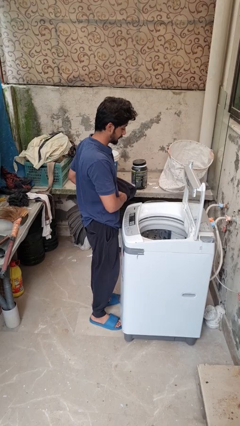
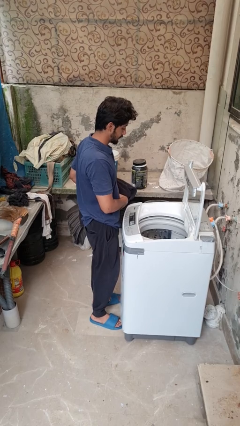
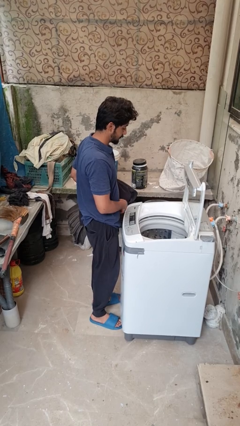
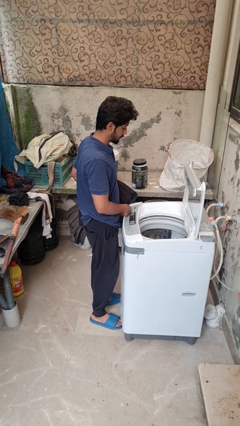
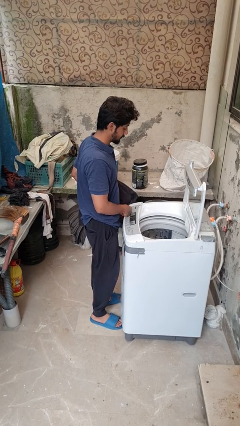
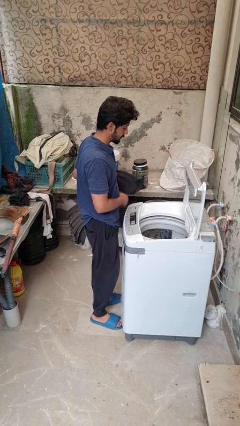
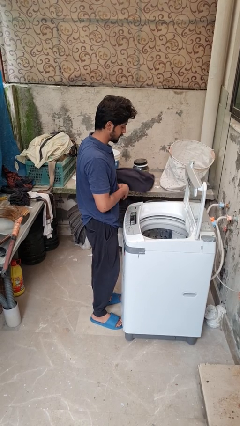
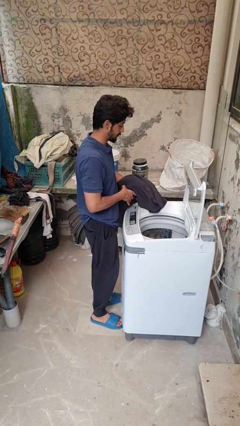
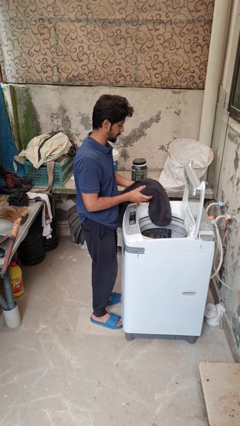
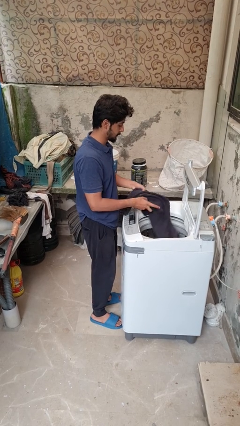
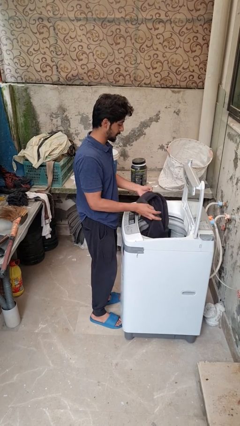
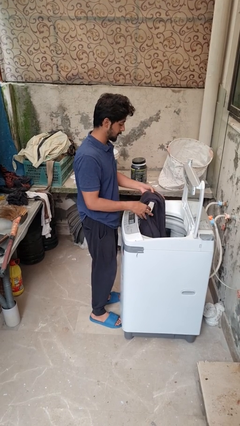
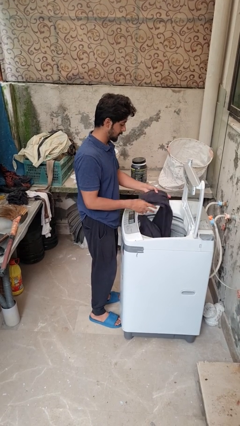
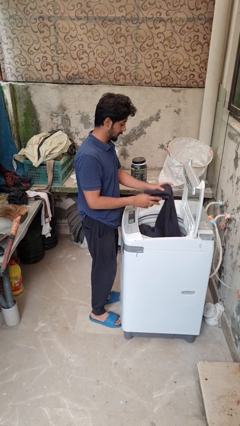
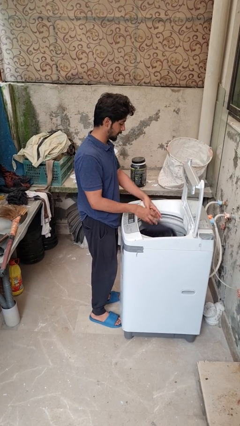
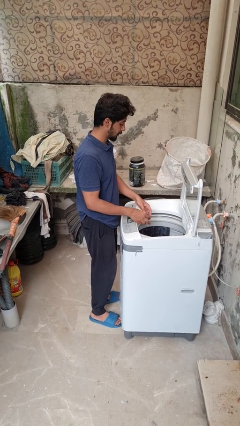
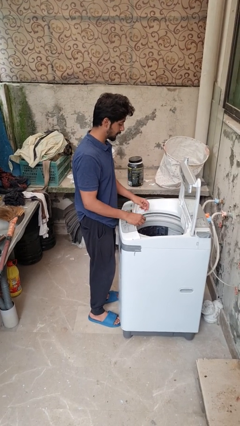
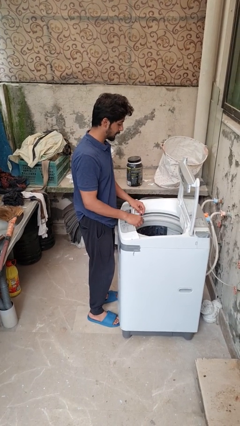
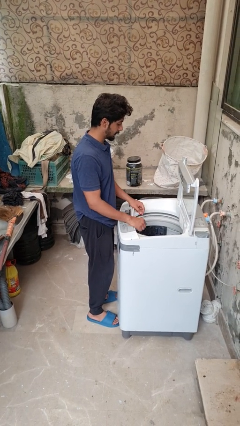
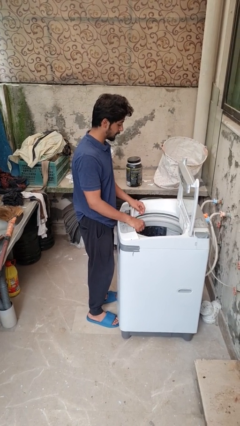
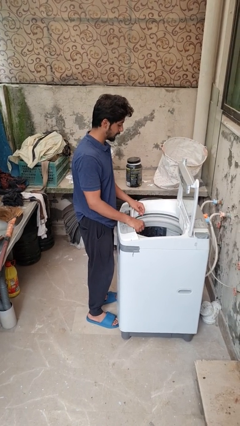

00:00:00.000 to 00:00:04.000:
person loads dryer

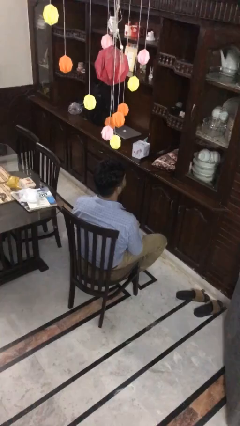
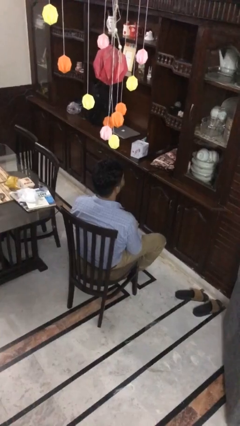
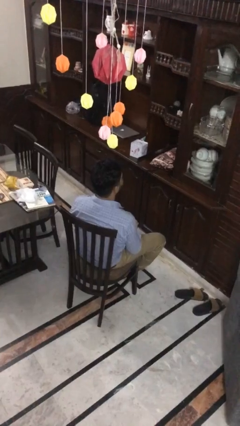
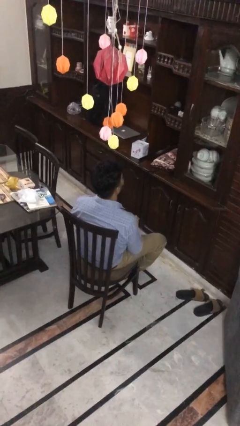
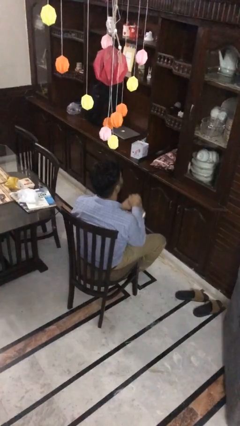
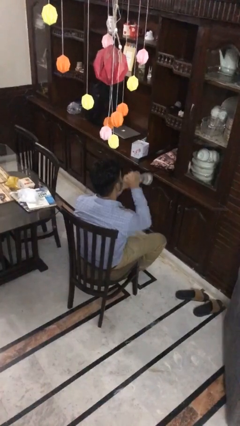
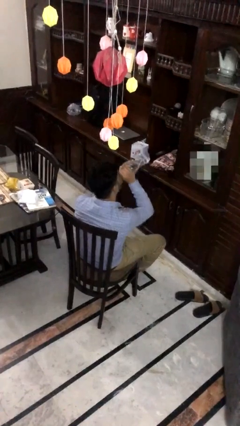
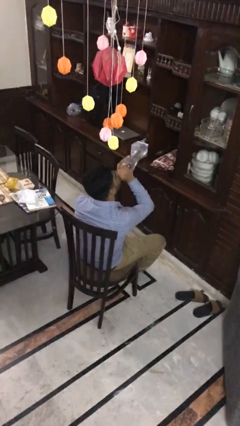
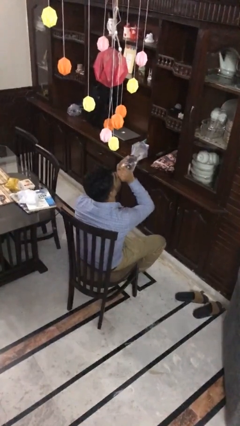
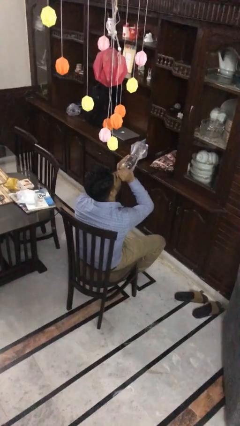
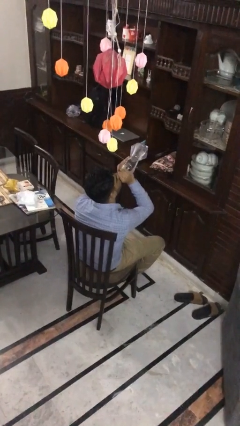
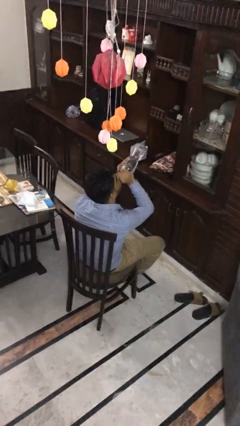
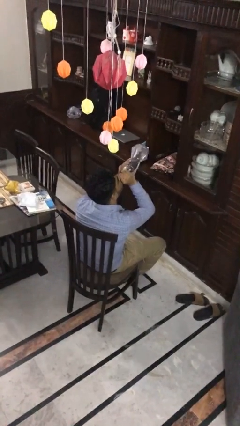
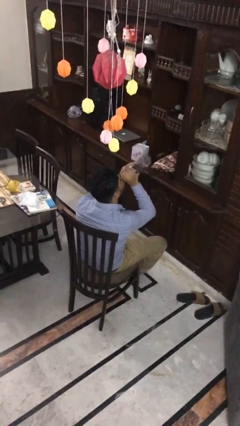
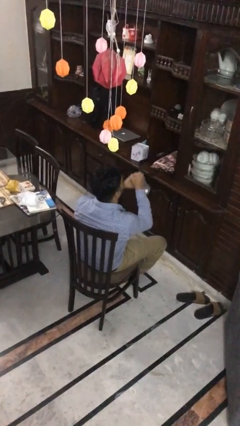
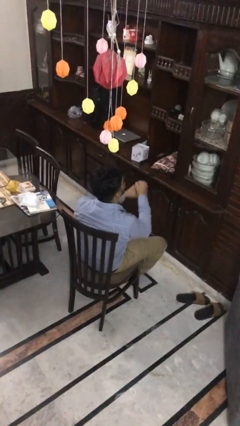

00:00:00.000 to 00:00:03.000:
person drinks from bottle

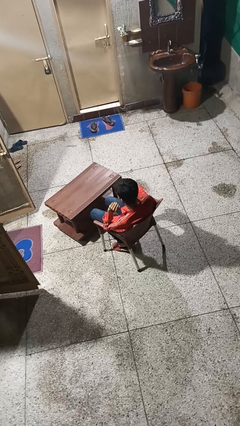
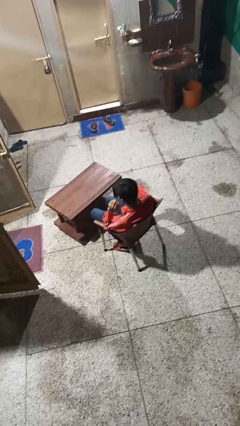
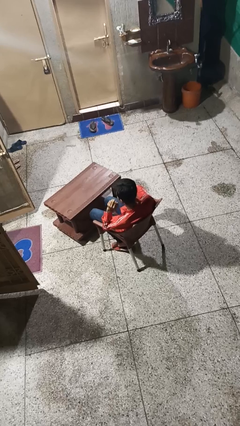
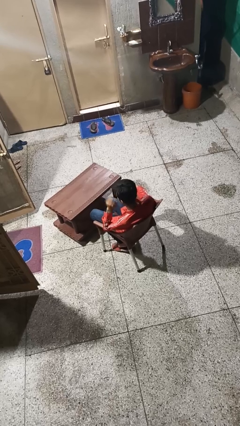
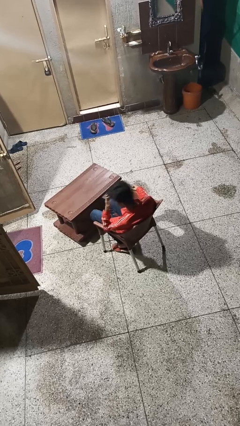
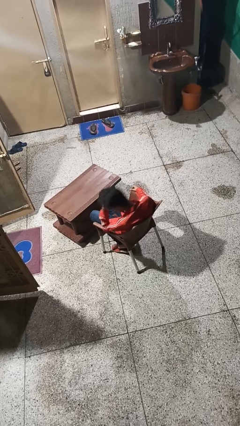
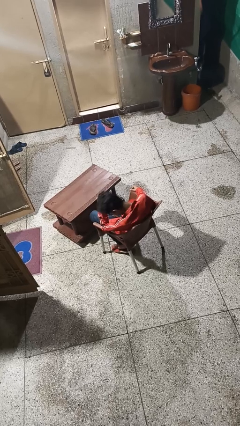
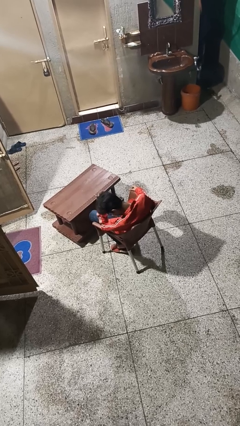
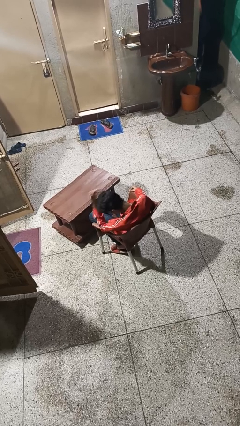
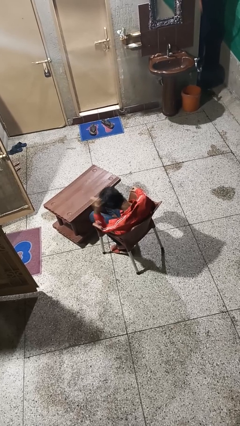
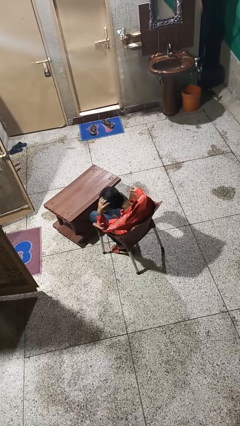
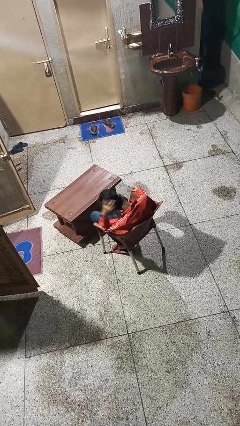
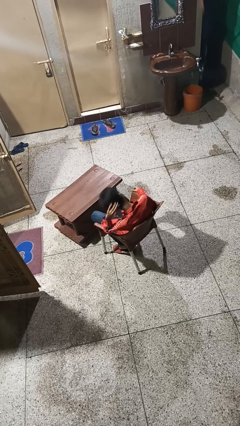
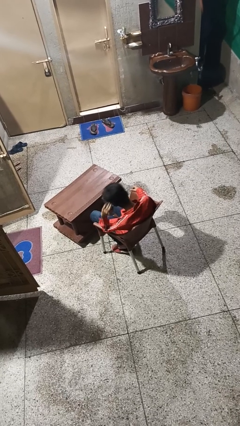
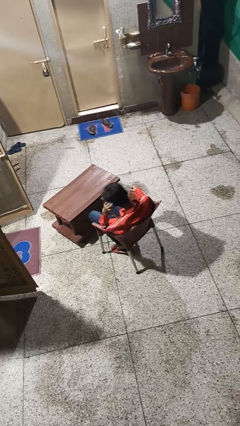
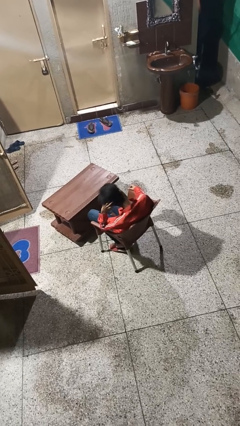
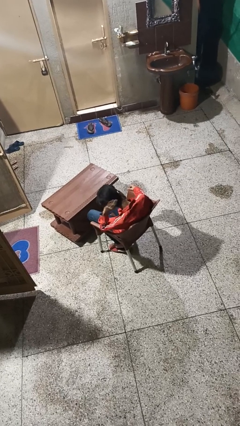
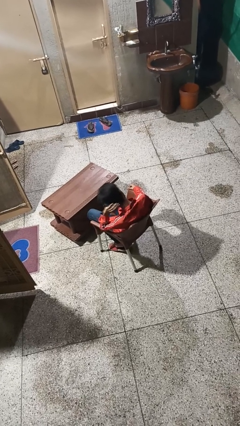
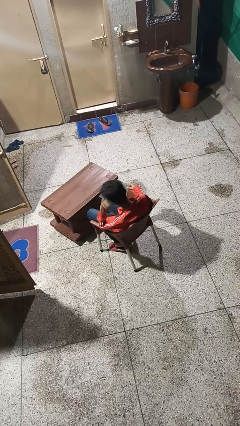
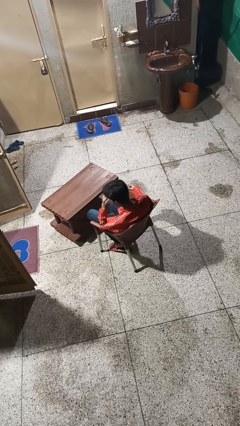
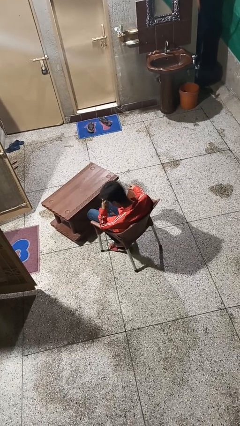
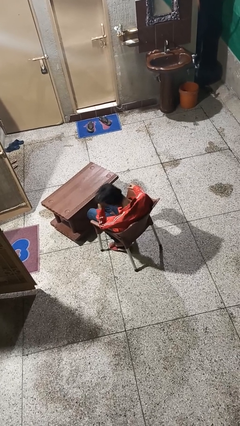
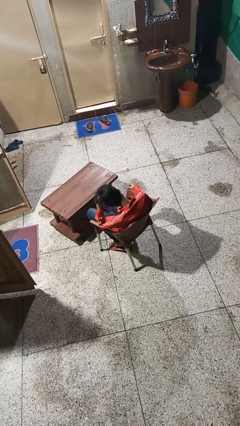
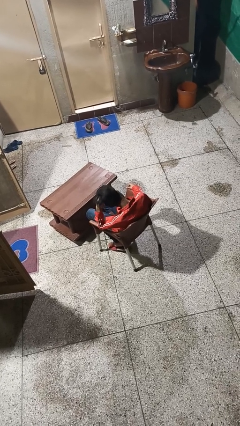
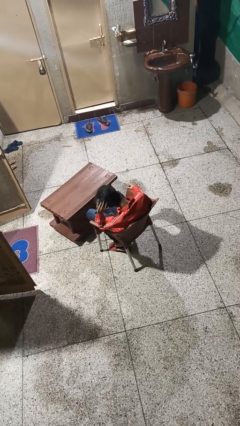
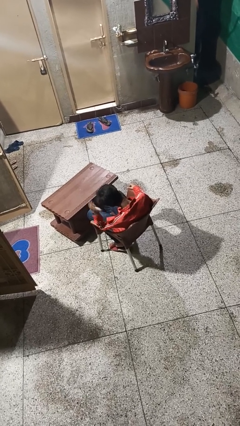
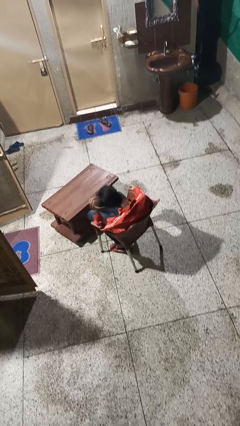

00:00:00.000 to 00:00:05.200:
person strokes hair

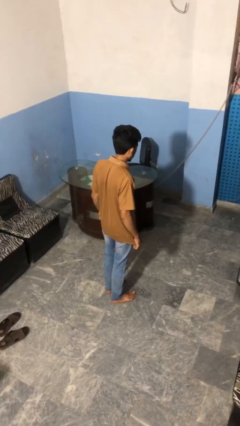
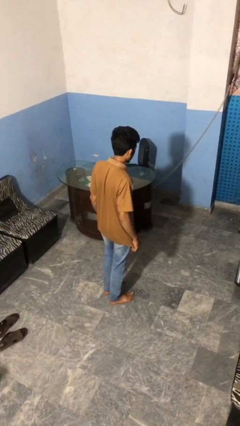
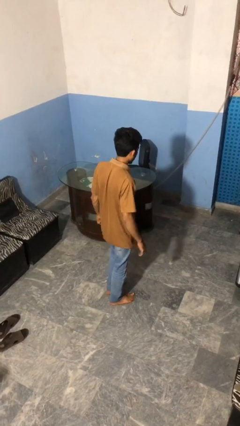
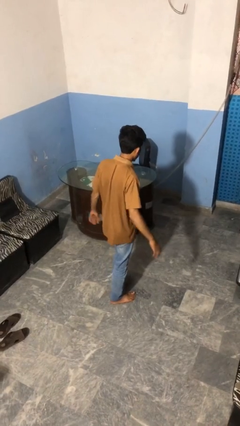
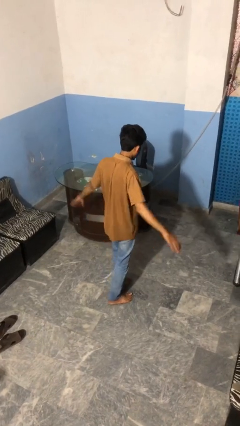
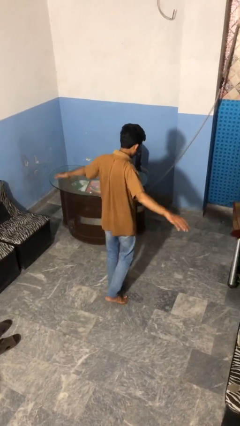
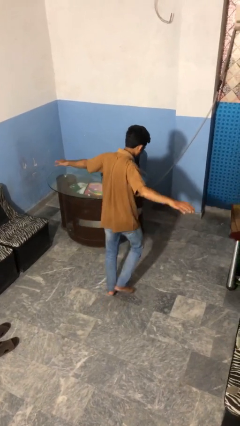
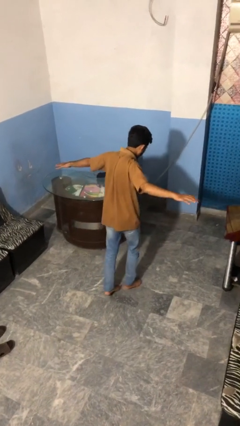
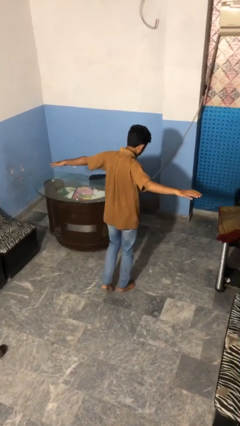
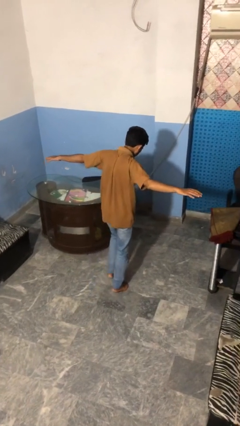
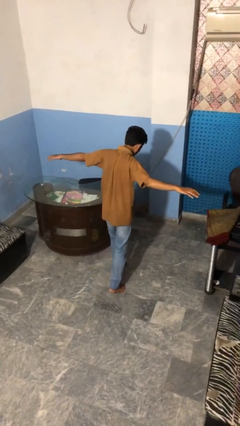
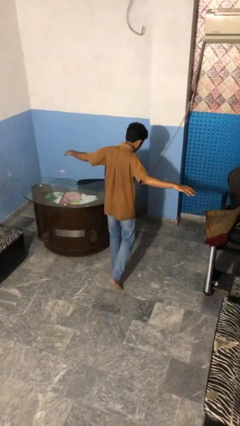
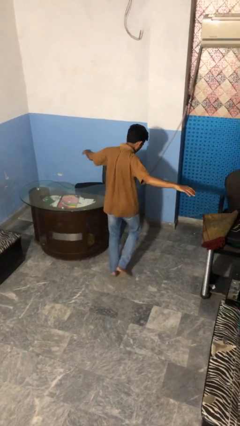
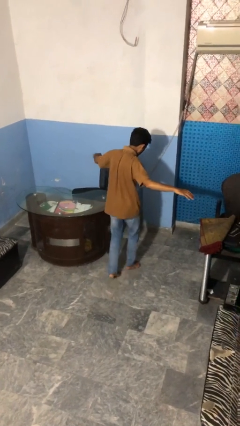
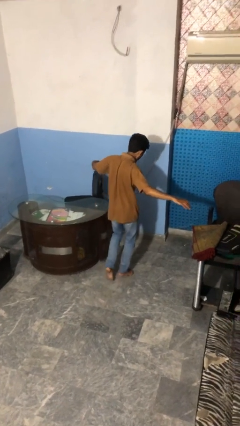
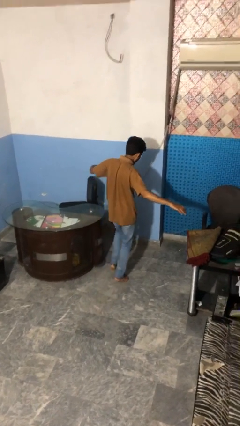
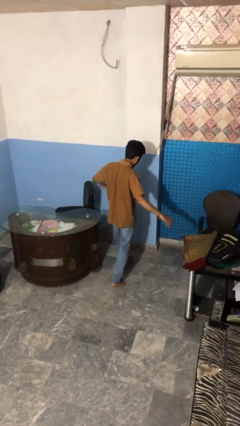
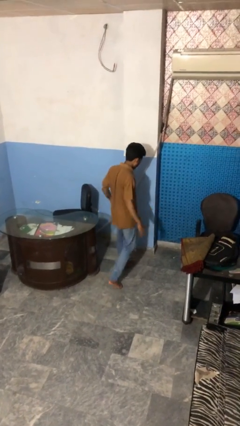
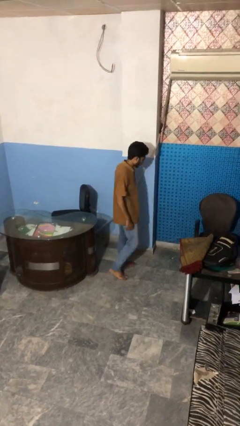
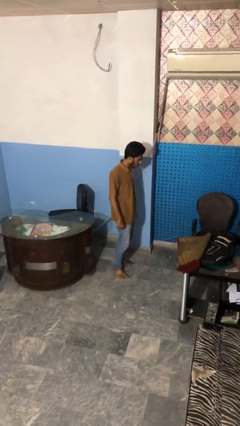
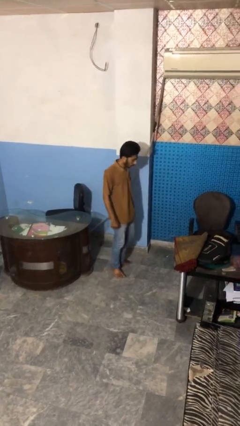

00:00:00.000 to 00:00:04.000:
person walks tiptoe

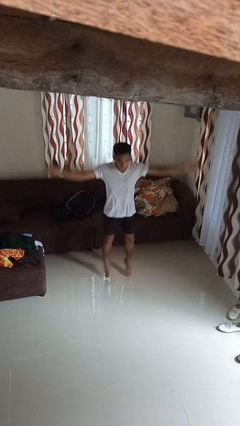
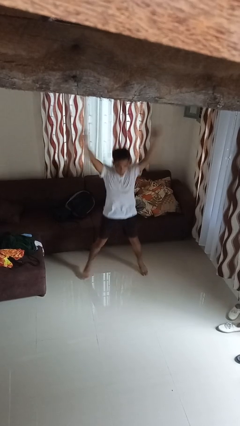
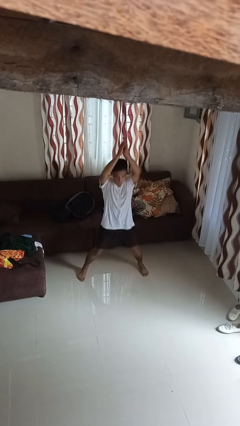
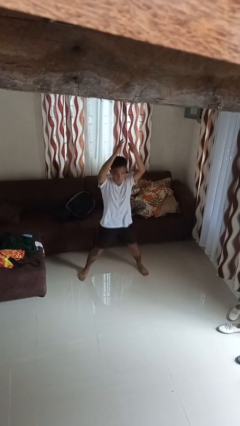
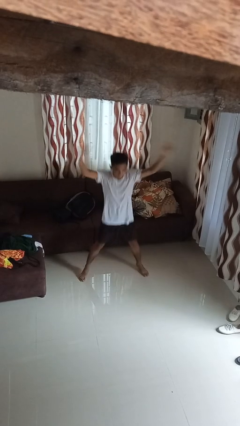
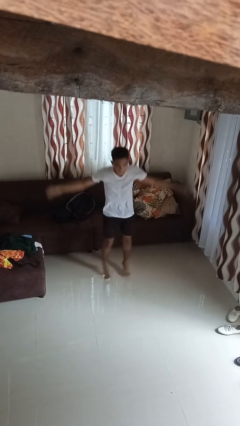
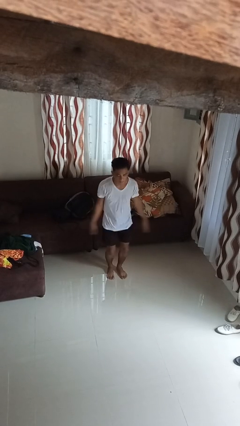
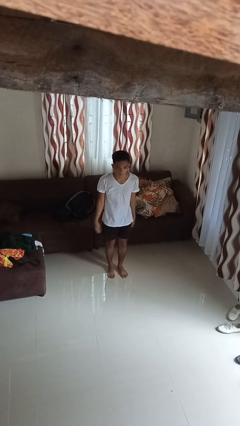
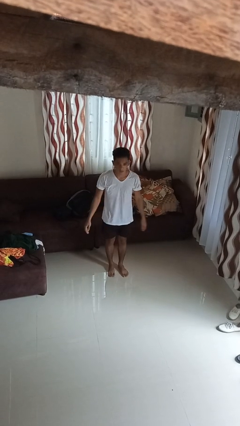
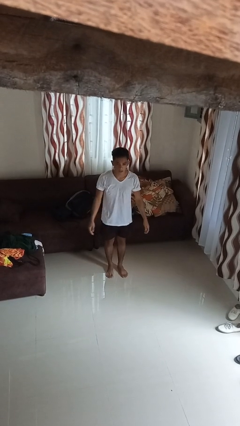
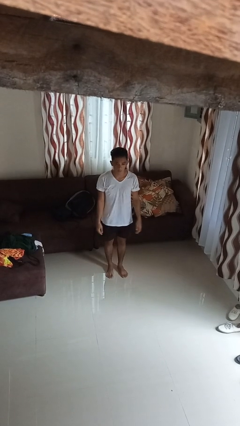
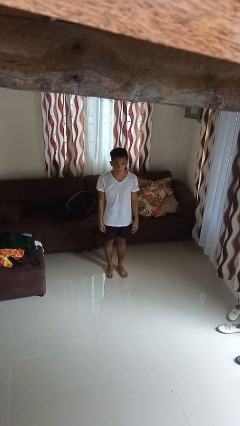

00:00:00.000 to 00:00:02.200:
person exercises with jumping jacks
